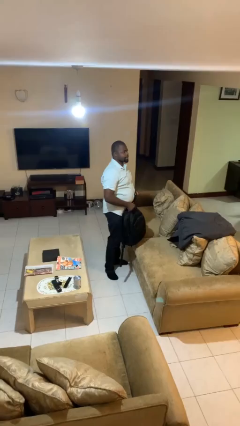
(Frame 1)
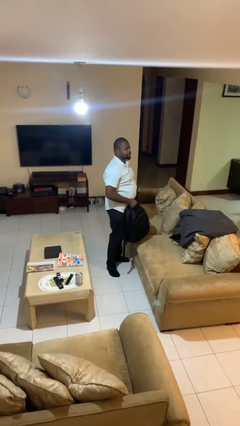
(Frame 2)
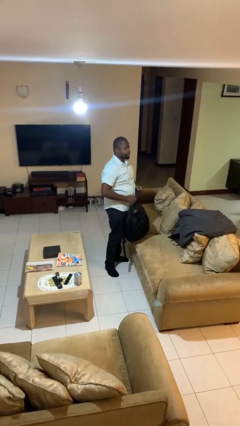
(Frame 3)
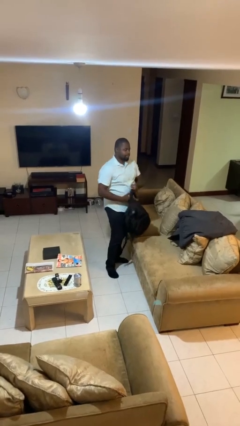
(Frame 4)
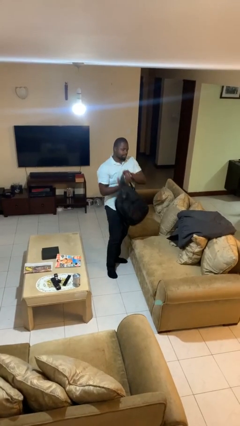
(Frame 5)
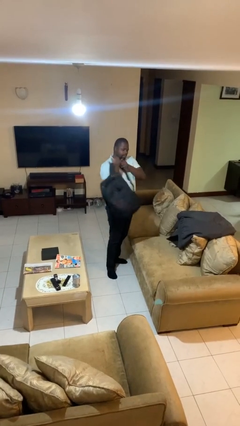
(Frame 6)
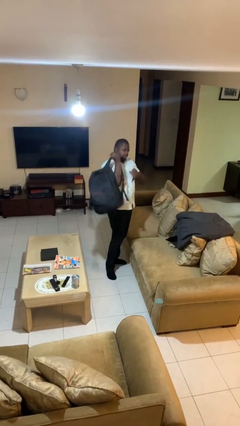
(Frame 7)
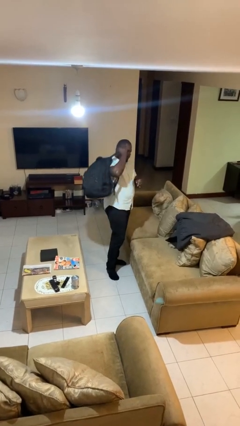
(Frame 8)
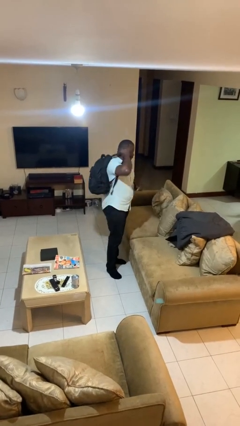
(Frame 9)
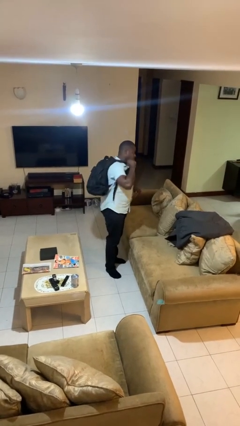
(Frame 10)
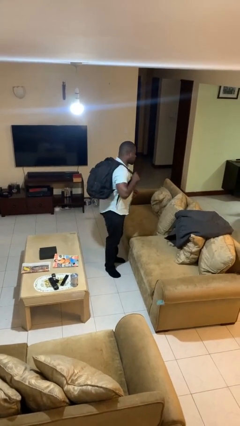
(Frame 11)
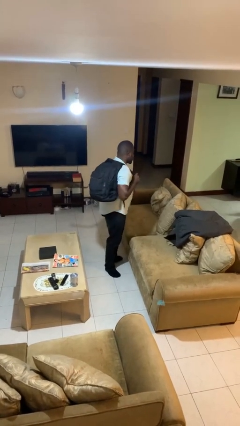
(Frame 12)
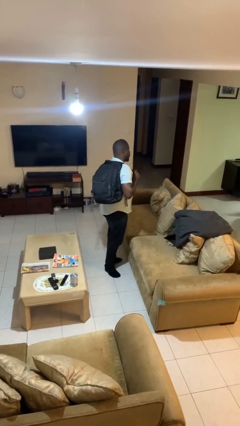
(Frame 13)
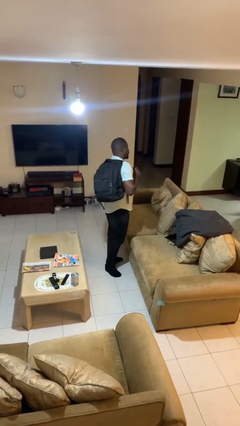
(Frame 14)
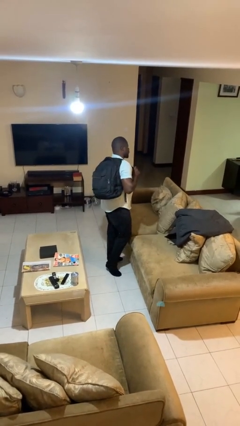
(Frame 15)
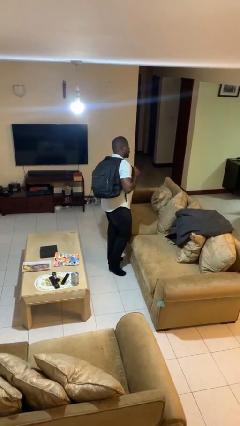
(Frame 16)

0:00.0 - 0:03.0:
person puts on backpack

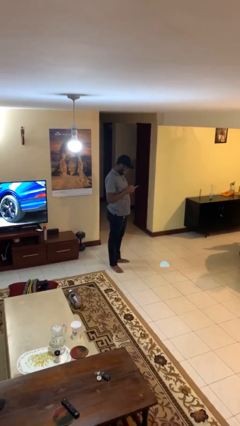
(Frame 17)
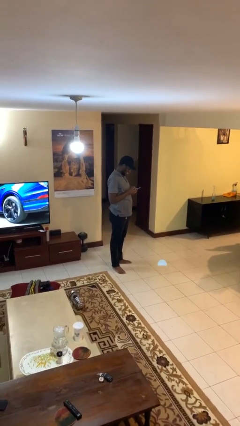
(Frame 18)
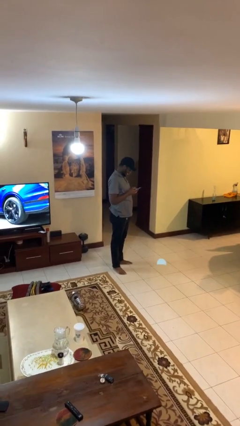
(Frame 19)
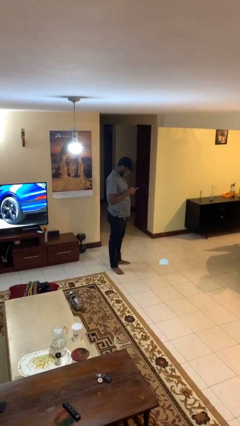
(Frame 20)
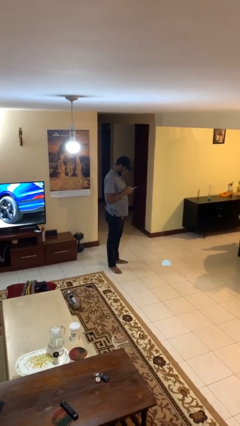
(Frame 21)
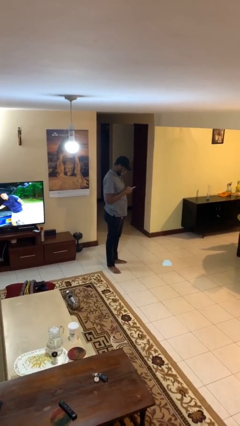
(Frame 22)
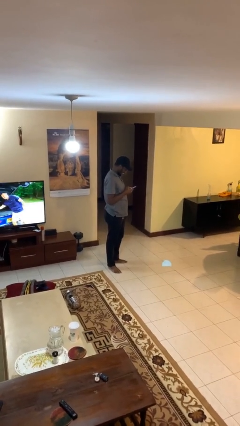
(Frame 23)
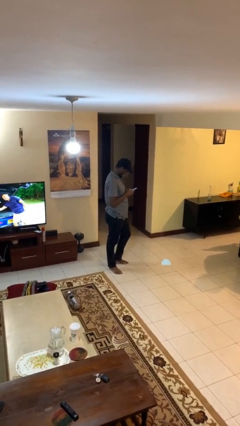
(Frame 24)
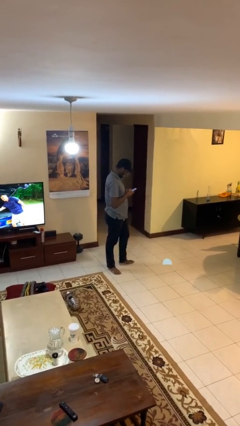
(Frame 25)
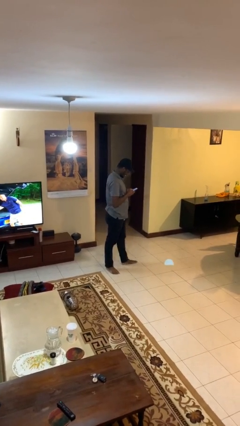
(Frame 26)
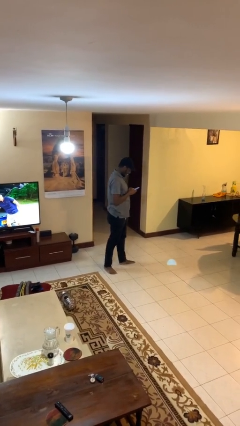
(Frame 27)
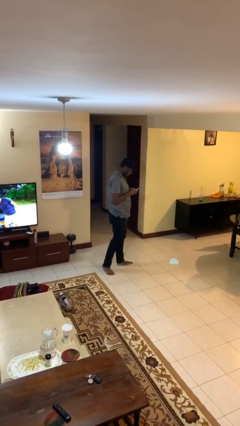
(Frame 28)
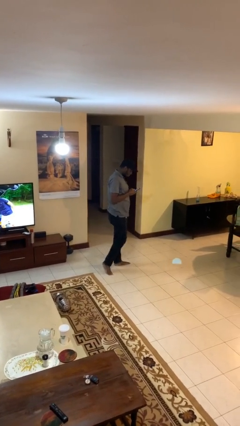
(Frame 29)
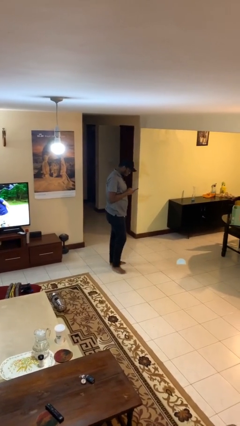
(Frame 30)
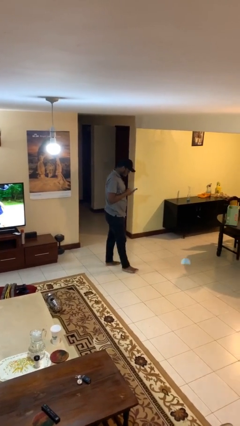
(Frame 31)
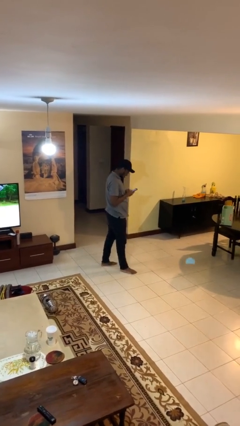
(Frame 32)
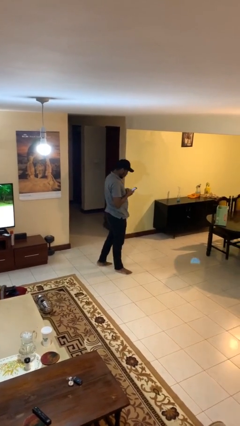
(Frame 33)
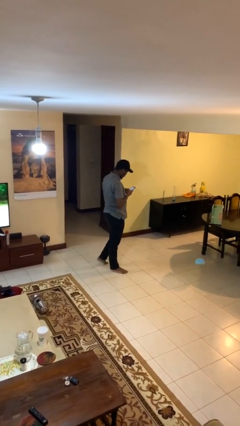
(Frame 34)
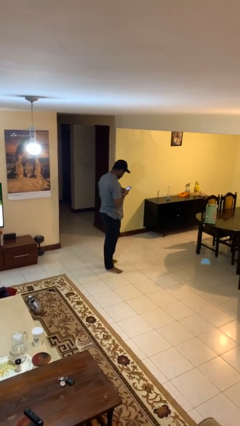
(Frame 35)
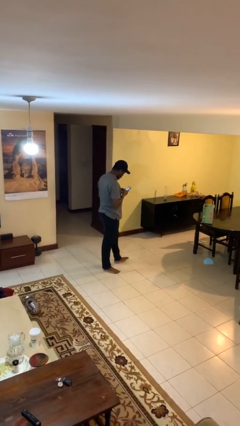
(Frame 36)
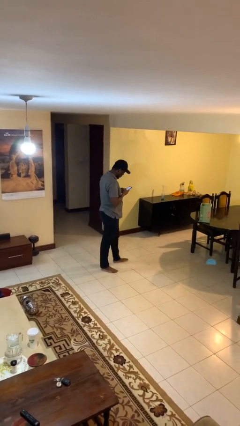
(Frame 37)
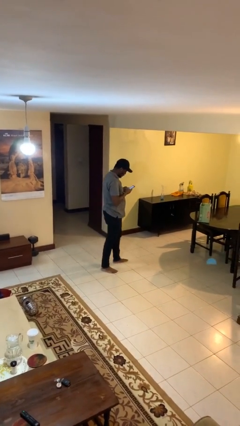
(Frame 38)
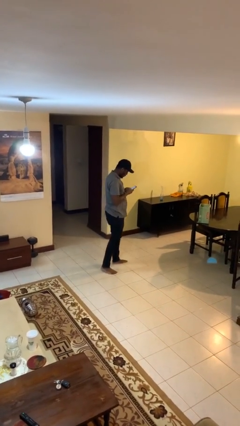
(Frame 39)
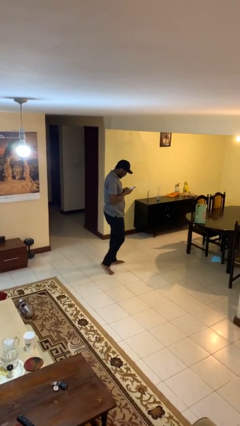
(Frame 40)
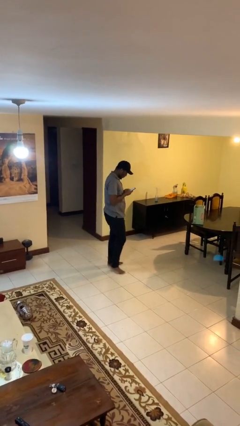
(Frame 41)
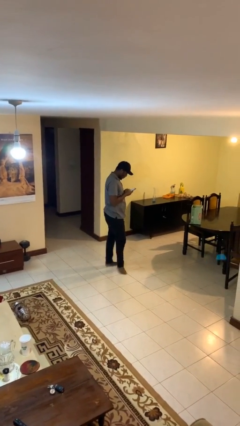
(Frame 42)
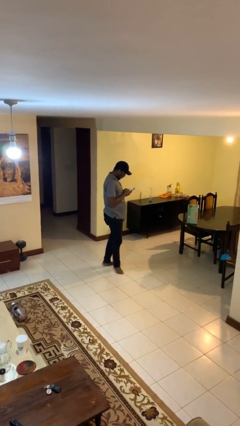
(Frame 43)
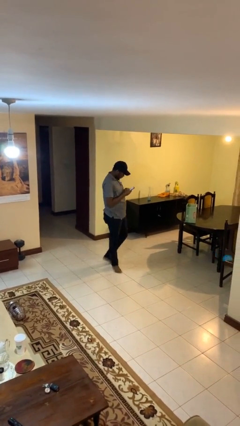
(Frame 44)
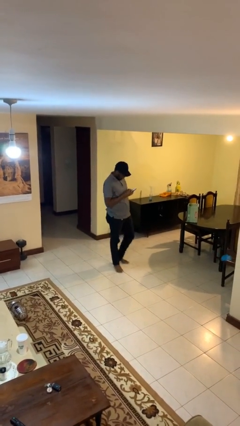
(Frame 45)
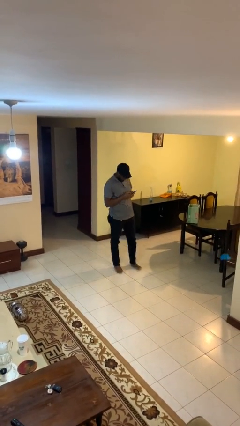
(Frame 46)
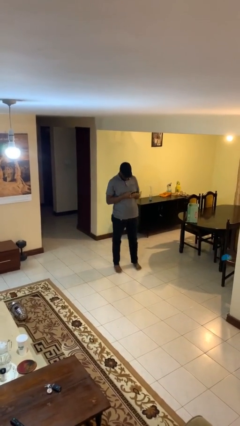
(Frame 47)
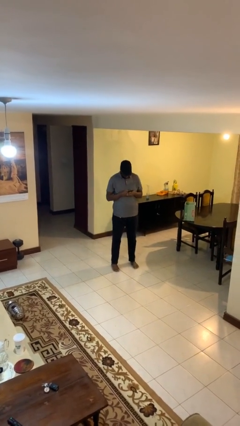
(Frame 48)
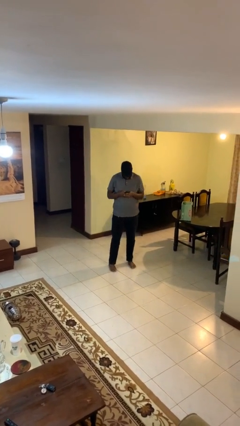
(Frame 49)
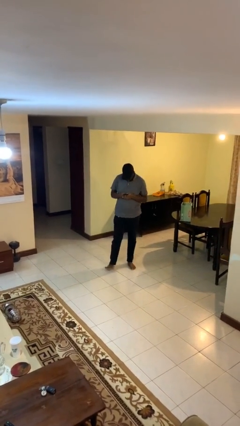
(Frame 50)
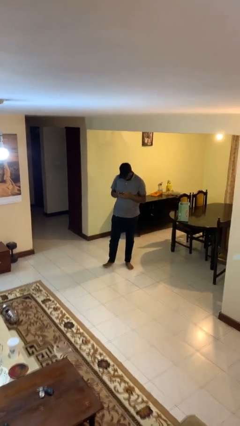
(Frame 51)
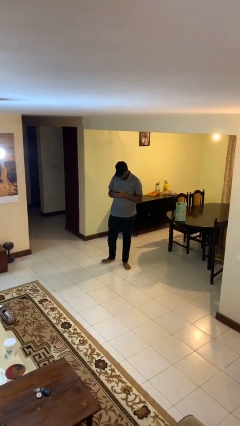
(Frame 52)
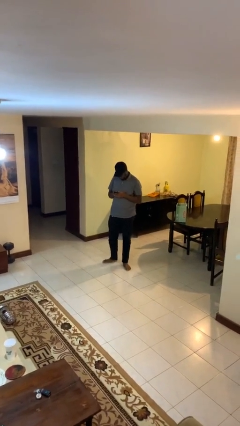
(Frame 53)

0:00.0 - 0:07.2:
person texts on phone

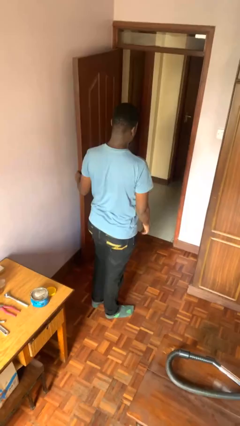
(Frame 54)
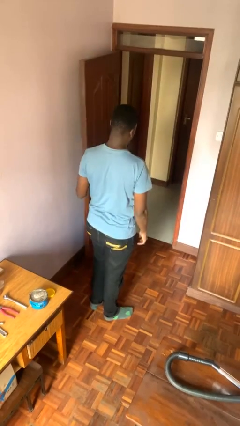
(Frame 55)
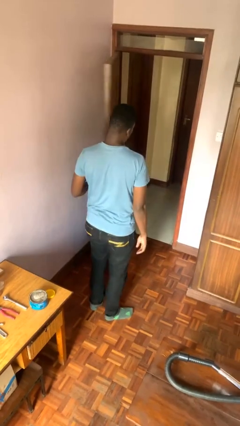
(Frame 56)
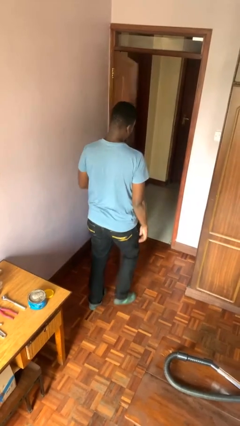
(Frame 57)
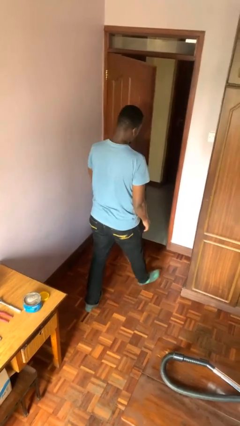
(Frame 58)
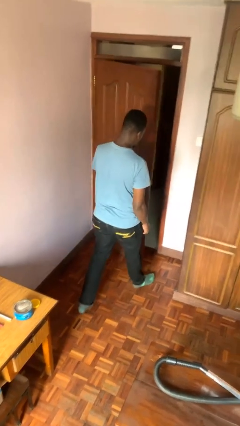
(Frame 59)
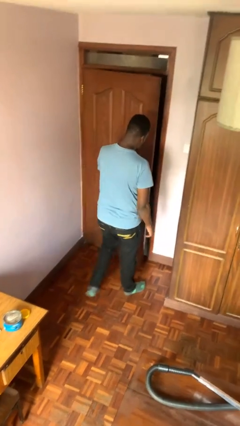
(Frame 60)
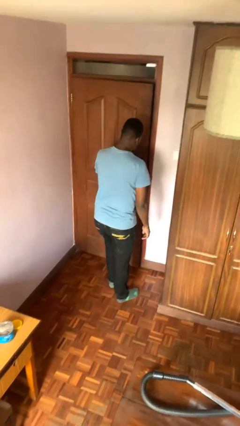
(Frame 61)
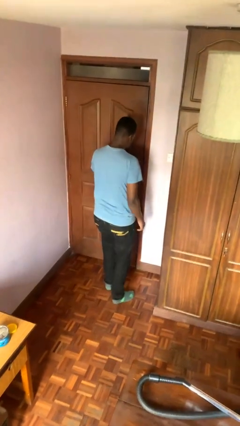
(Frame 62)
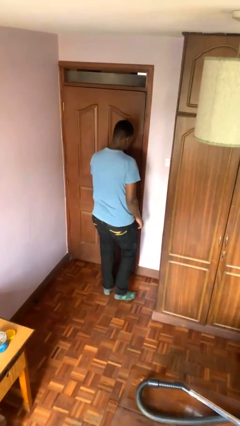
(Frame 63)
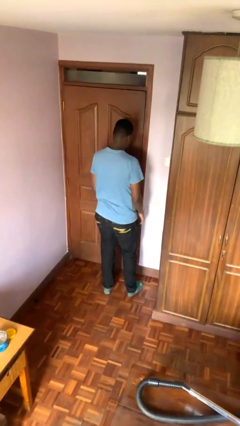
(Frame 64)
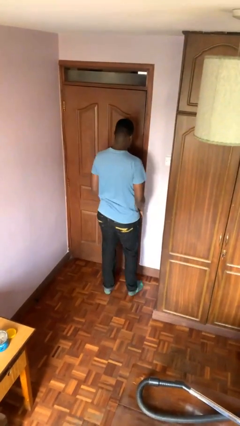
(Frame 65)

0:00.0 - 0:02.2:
person closes facility door

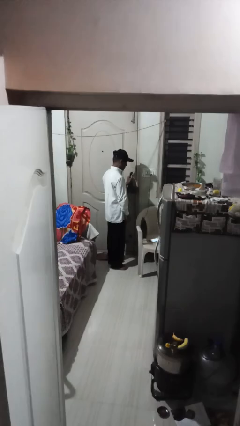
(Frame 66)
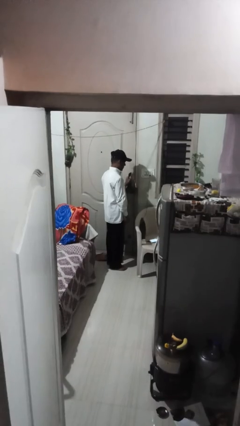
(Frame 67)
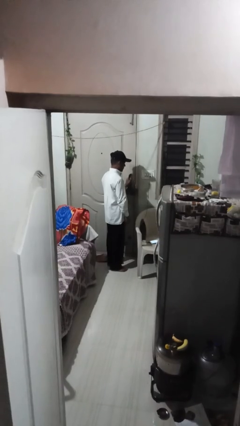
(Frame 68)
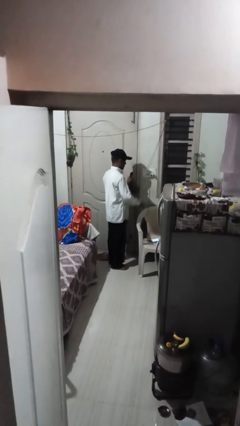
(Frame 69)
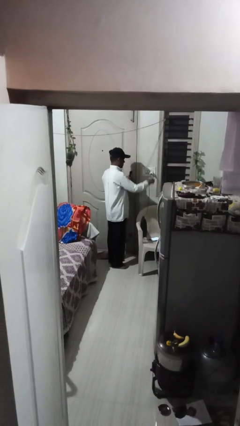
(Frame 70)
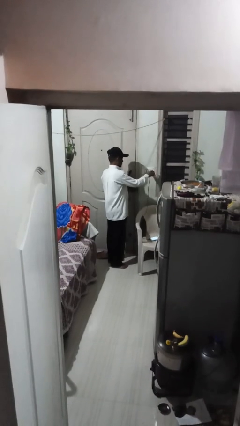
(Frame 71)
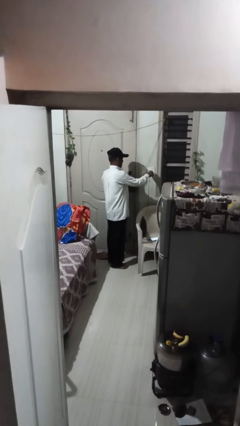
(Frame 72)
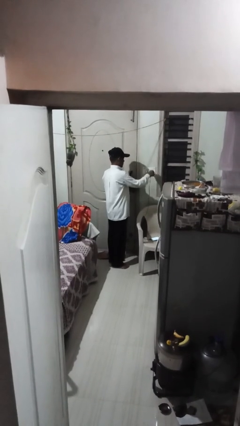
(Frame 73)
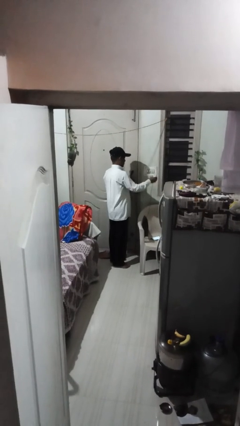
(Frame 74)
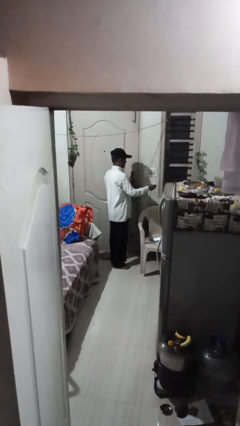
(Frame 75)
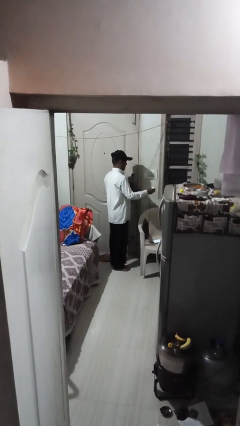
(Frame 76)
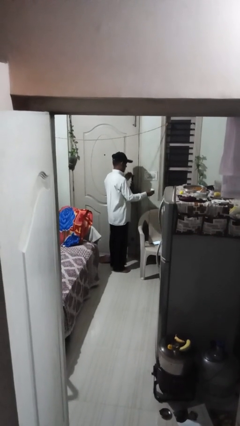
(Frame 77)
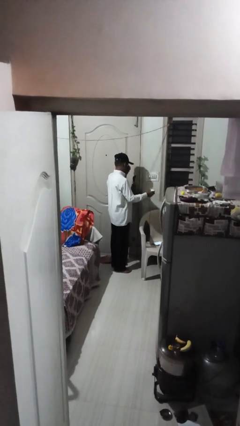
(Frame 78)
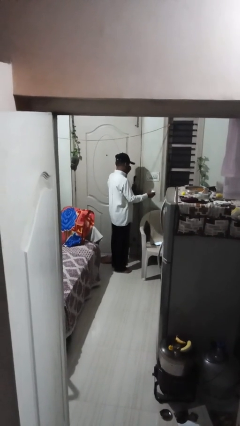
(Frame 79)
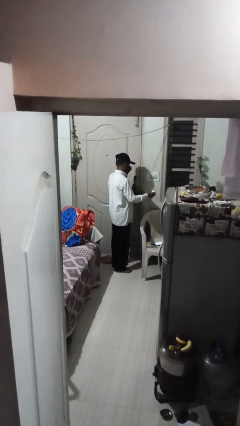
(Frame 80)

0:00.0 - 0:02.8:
person unplugs from electrical socket

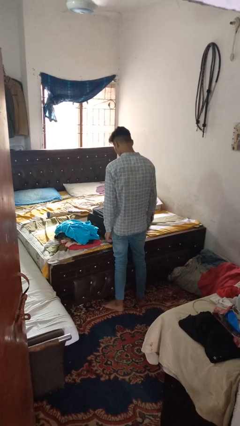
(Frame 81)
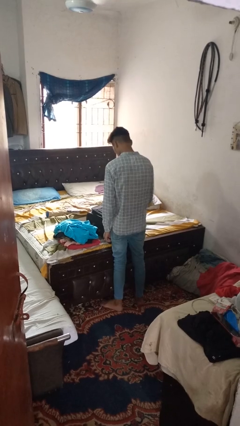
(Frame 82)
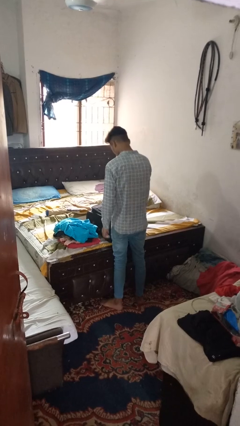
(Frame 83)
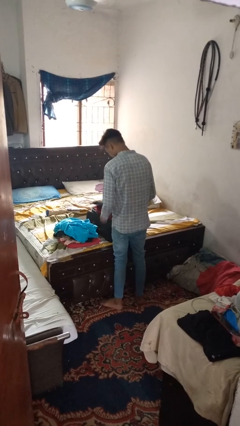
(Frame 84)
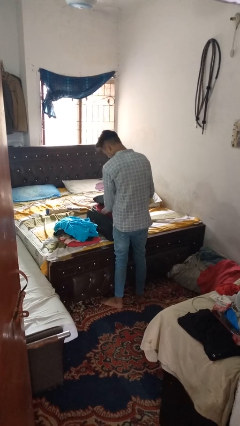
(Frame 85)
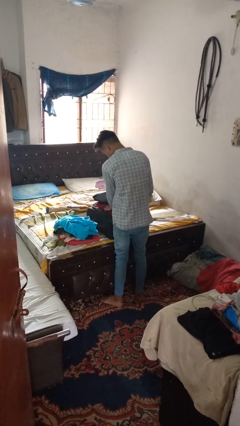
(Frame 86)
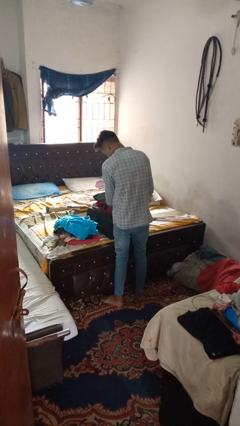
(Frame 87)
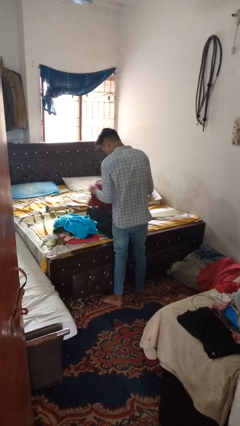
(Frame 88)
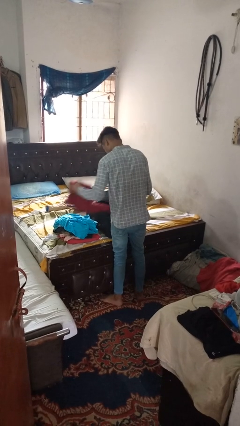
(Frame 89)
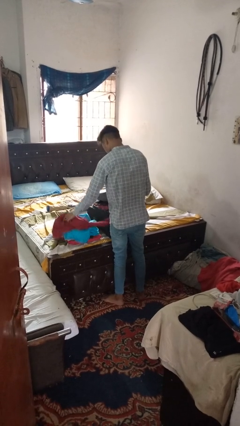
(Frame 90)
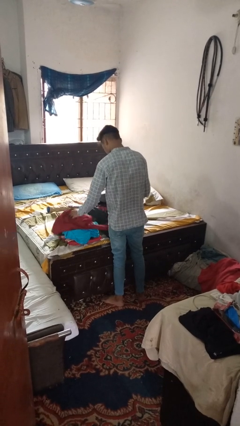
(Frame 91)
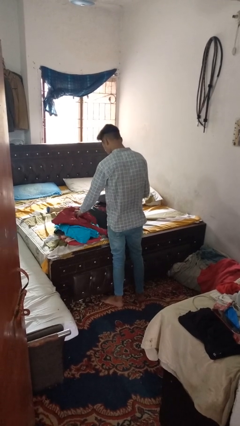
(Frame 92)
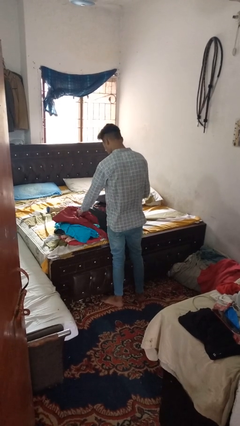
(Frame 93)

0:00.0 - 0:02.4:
person unloads clothes from suitcase
